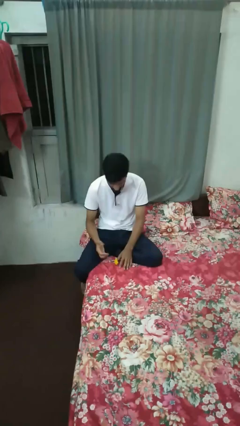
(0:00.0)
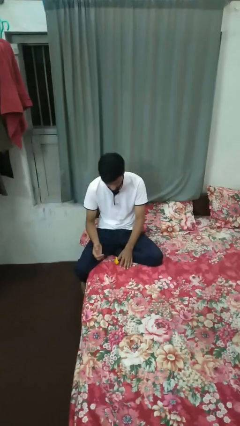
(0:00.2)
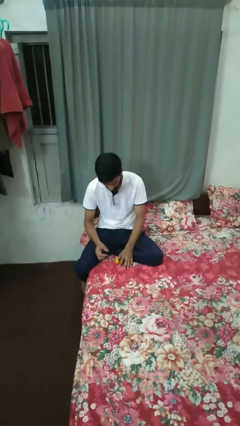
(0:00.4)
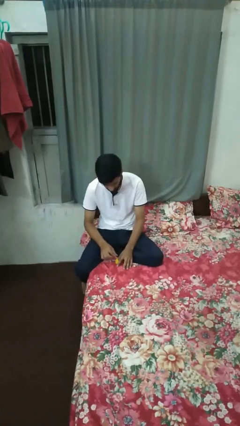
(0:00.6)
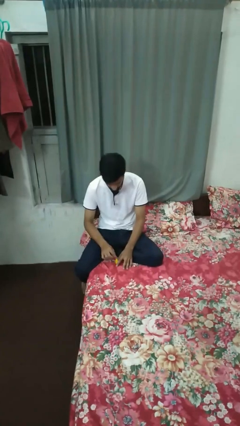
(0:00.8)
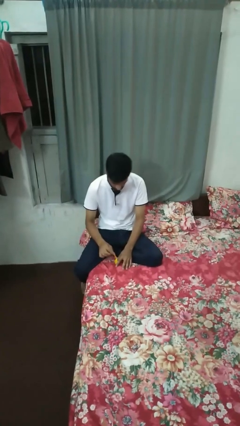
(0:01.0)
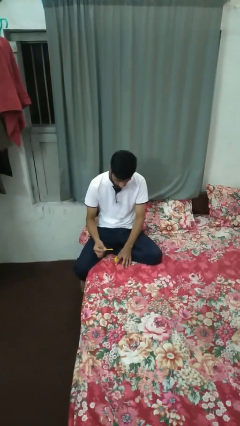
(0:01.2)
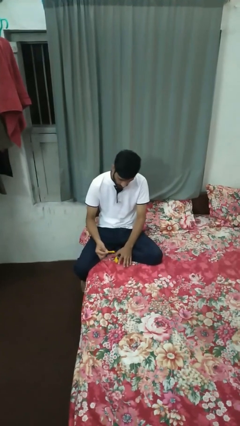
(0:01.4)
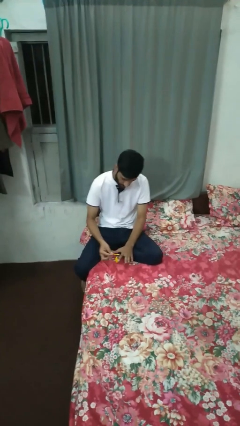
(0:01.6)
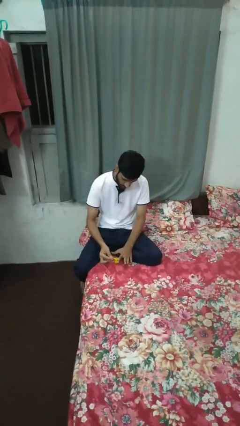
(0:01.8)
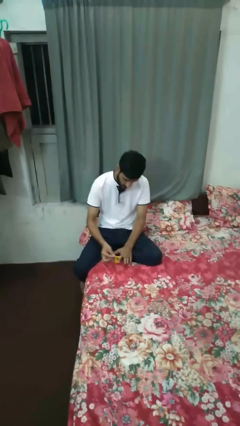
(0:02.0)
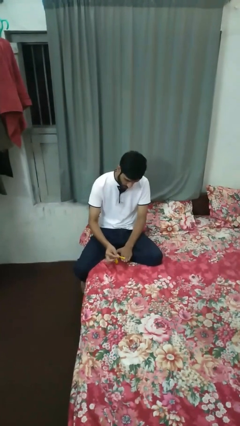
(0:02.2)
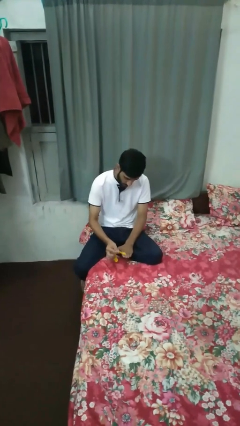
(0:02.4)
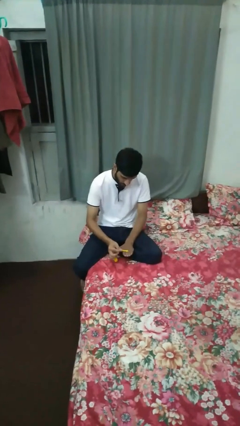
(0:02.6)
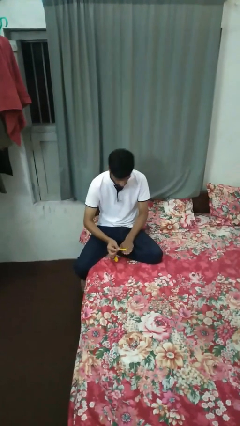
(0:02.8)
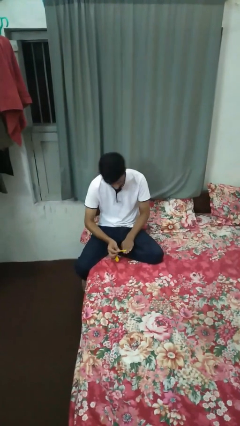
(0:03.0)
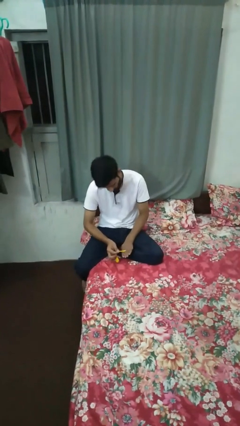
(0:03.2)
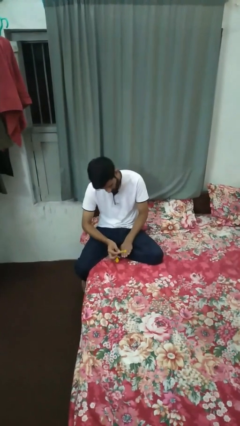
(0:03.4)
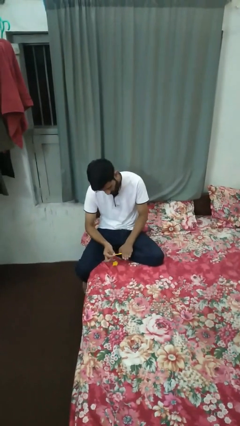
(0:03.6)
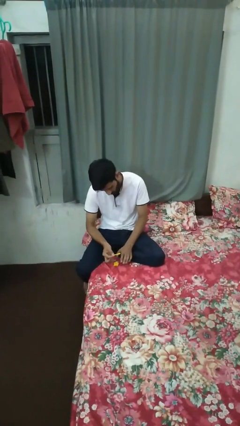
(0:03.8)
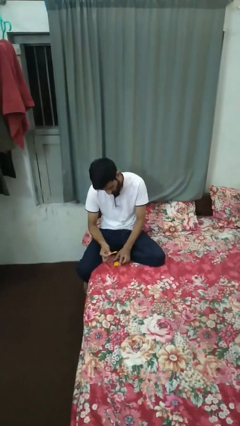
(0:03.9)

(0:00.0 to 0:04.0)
person paints fingernails

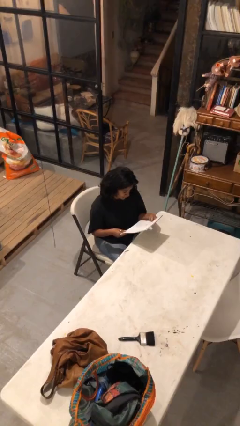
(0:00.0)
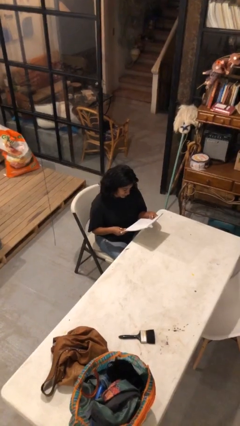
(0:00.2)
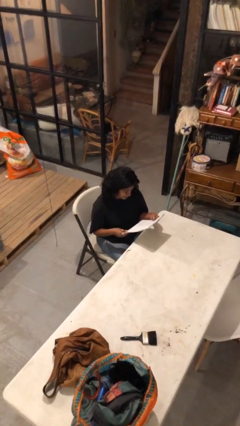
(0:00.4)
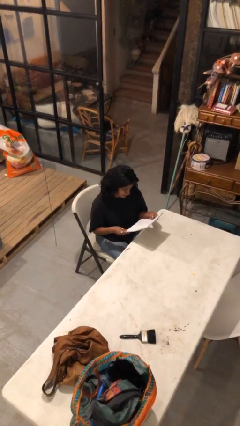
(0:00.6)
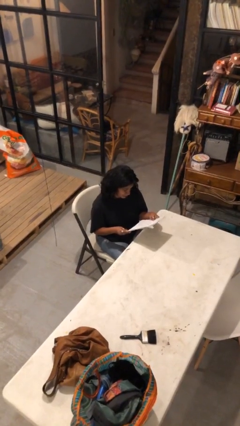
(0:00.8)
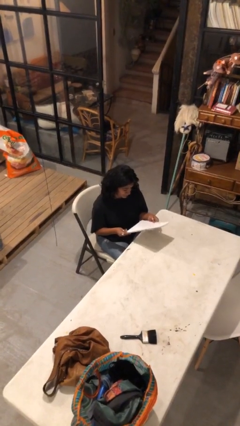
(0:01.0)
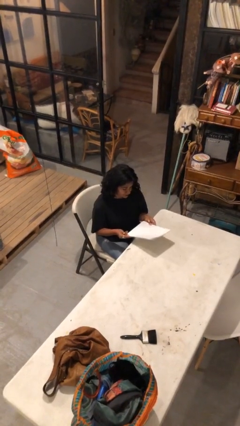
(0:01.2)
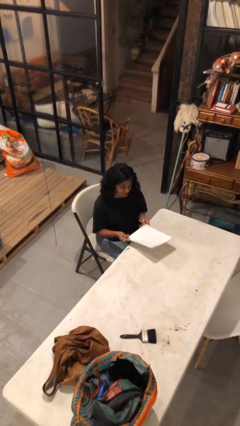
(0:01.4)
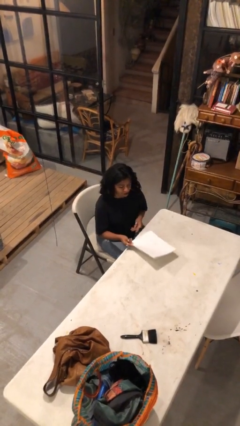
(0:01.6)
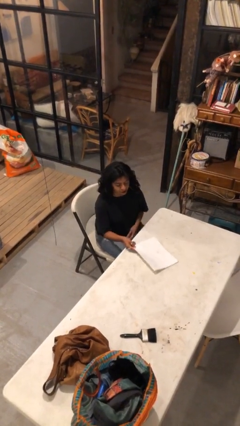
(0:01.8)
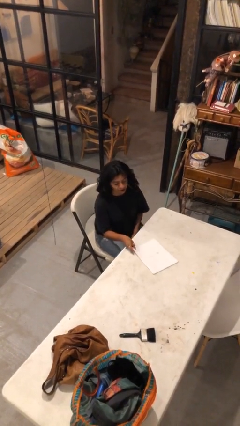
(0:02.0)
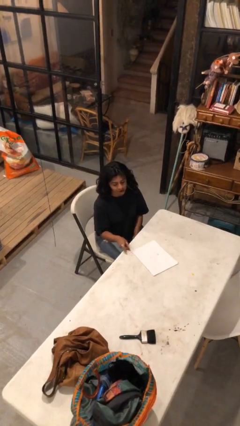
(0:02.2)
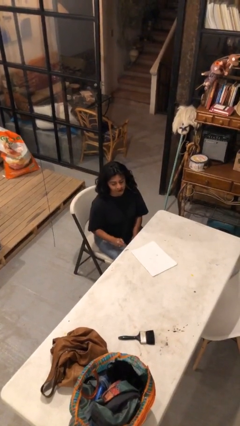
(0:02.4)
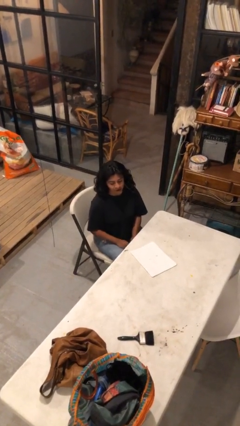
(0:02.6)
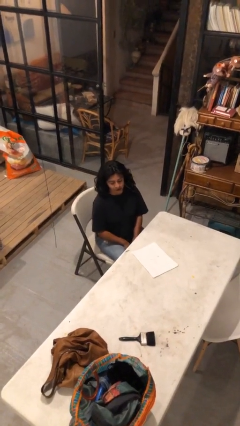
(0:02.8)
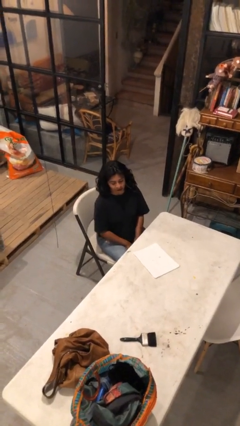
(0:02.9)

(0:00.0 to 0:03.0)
person puts down object on table

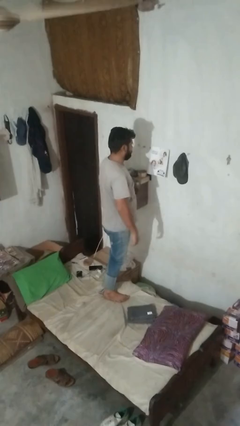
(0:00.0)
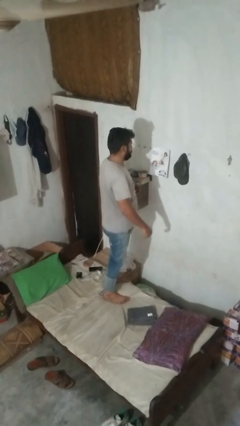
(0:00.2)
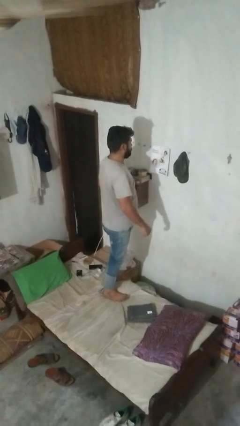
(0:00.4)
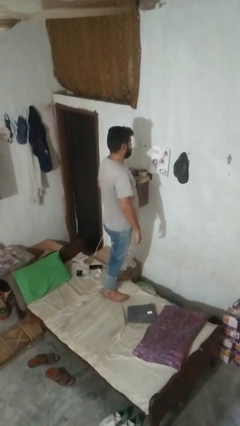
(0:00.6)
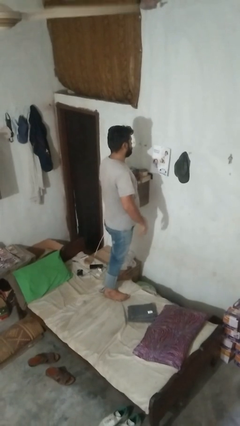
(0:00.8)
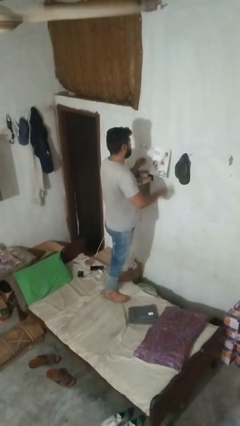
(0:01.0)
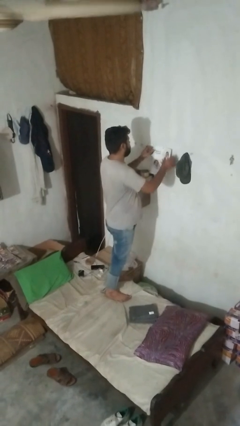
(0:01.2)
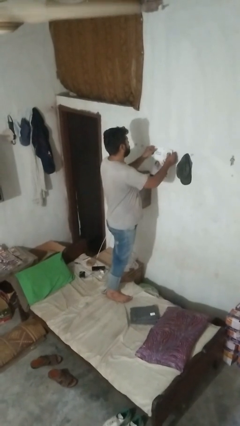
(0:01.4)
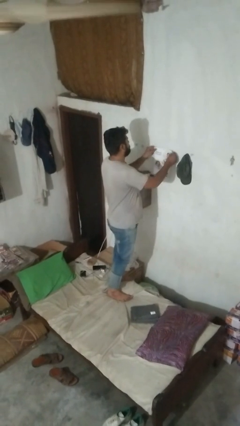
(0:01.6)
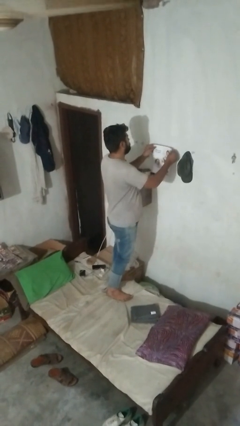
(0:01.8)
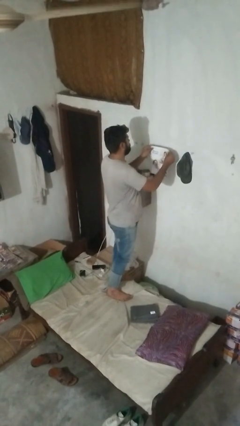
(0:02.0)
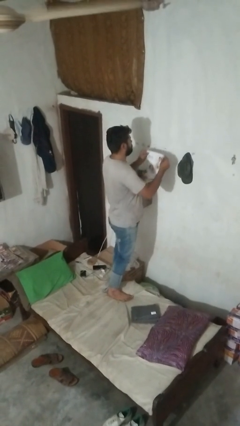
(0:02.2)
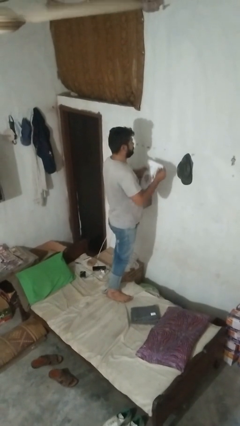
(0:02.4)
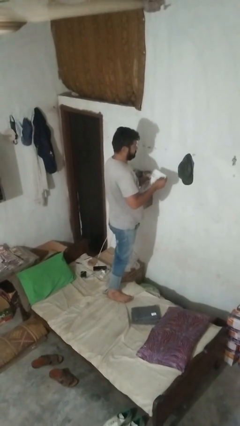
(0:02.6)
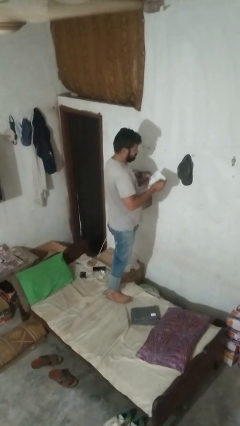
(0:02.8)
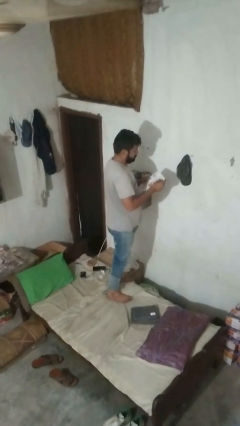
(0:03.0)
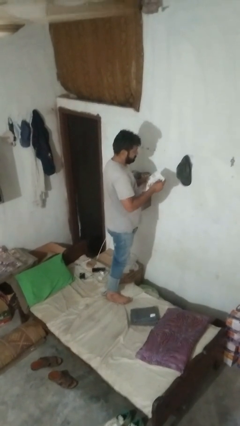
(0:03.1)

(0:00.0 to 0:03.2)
person takes down picture frame

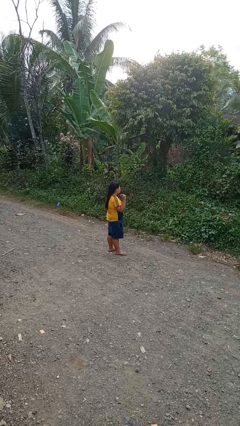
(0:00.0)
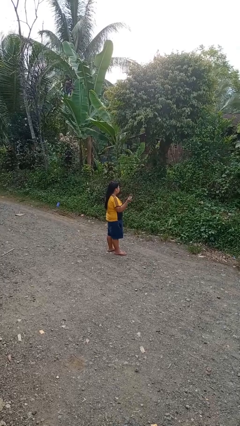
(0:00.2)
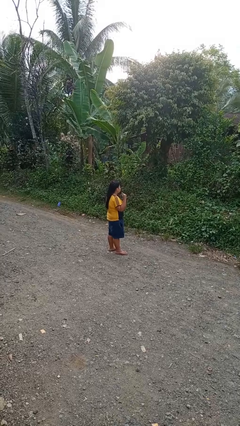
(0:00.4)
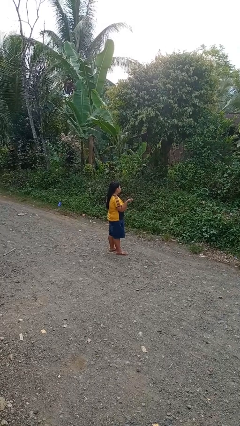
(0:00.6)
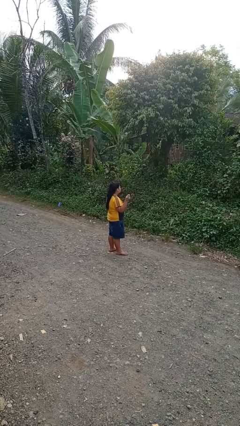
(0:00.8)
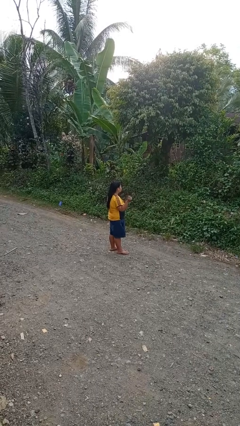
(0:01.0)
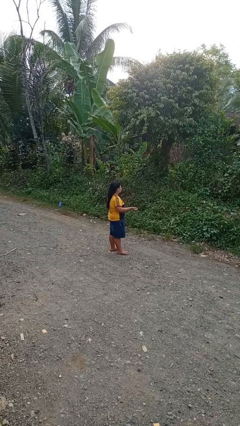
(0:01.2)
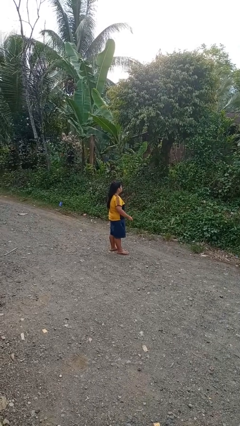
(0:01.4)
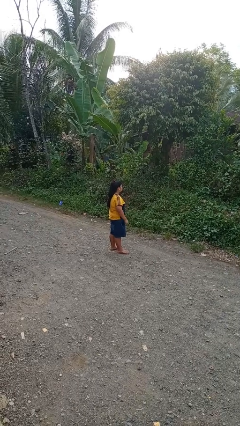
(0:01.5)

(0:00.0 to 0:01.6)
person snaps fingers

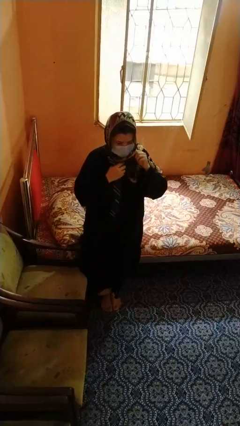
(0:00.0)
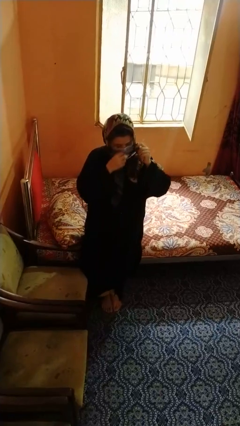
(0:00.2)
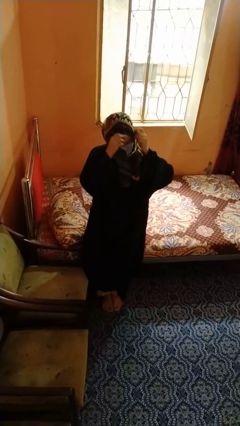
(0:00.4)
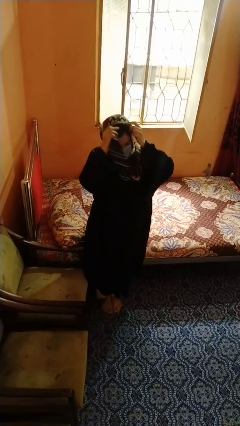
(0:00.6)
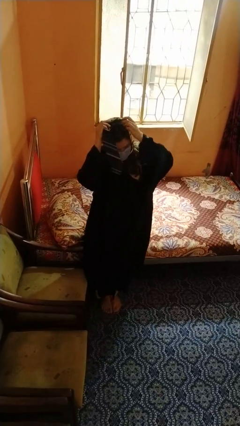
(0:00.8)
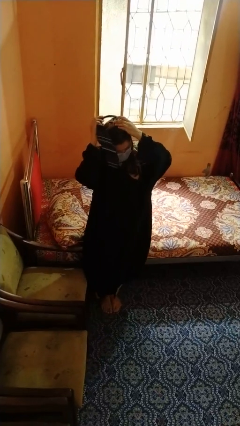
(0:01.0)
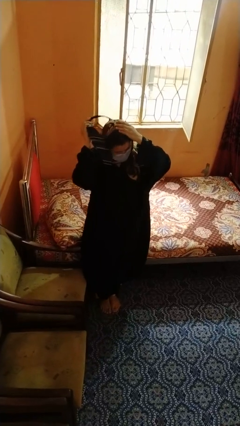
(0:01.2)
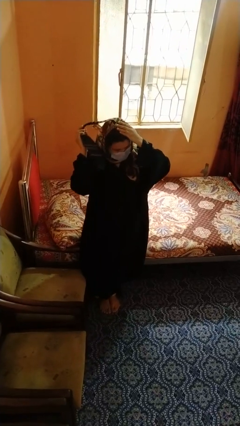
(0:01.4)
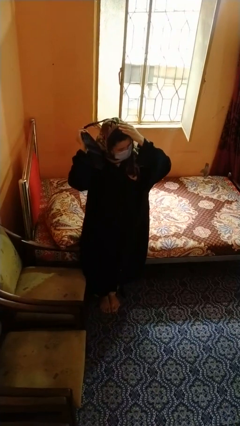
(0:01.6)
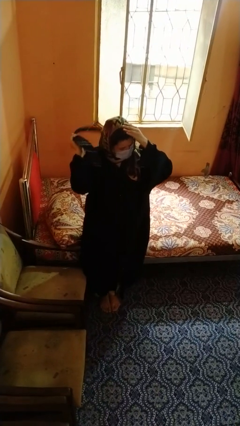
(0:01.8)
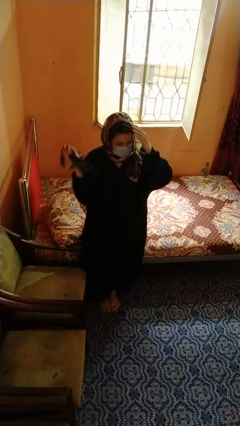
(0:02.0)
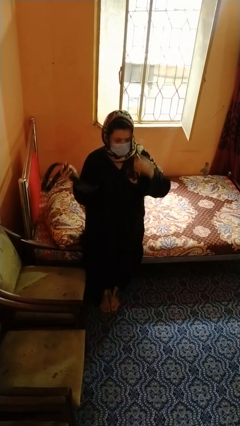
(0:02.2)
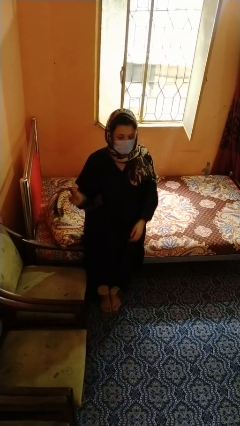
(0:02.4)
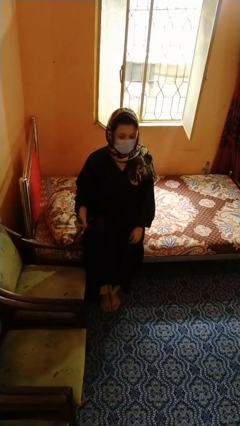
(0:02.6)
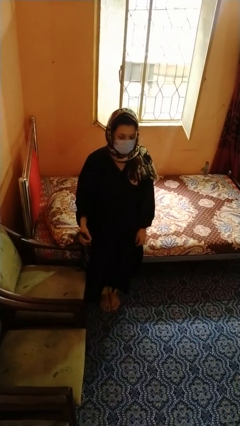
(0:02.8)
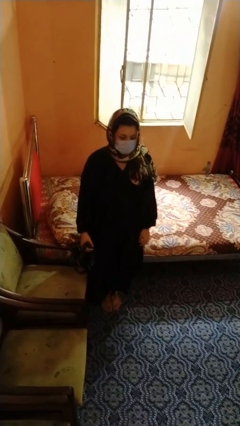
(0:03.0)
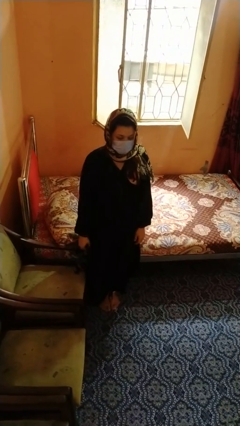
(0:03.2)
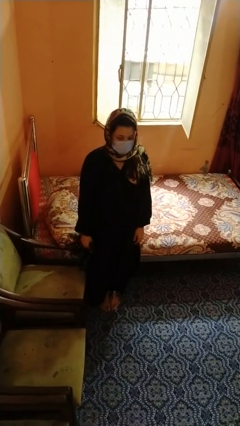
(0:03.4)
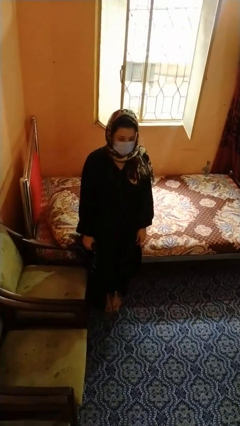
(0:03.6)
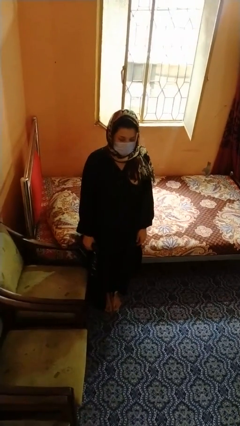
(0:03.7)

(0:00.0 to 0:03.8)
person takes off necktie

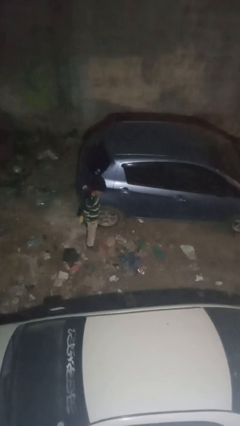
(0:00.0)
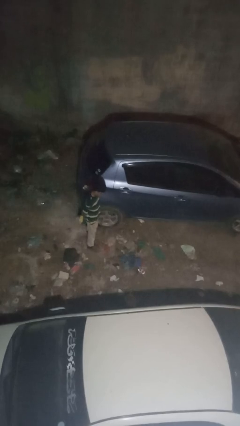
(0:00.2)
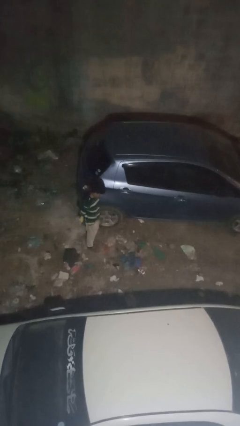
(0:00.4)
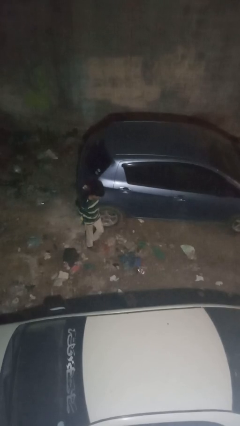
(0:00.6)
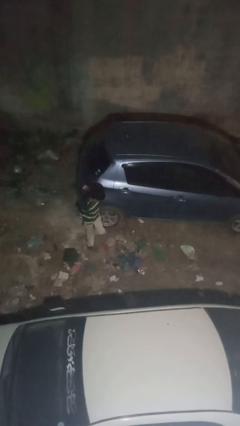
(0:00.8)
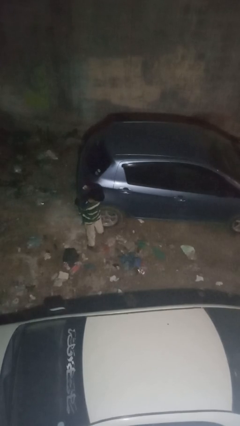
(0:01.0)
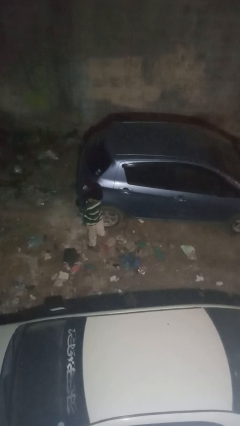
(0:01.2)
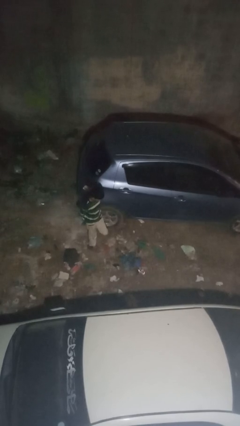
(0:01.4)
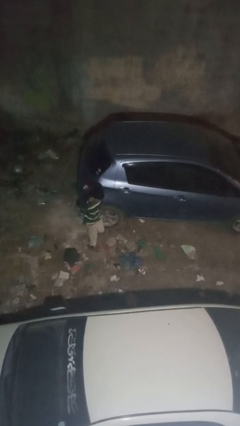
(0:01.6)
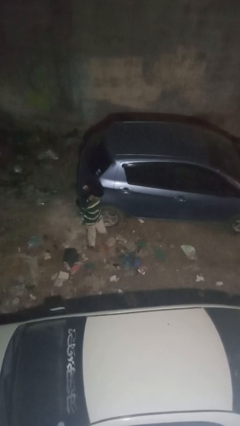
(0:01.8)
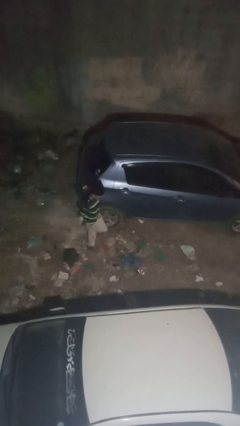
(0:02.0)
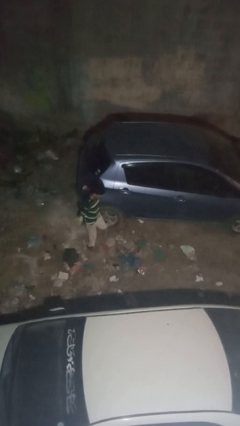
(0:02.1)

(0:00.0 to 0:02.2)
person kicks car tires
